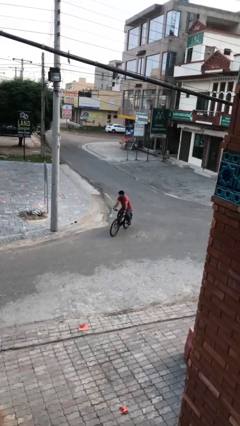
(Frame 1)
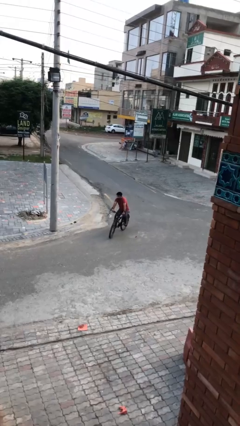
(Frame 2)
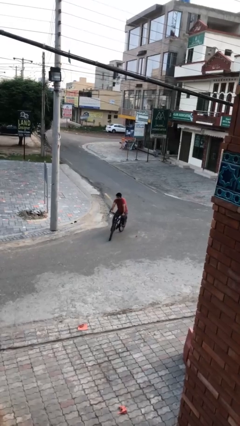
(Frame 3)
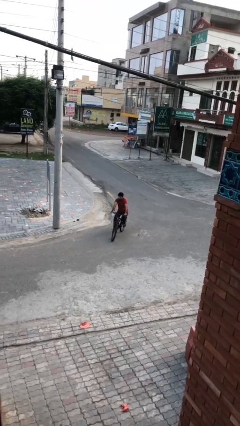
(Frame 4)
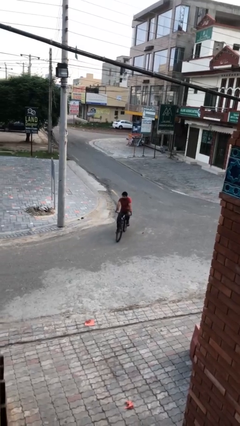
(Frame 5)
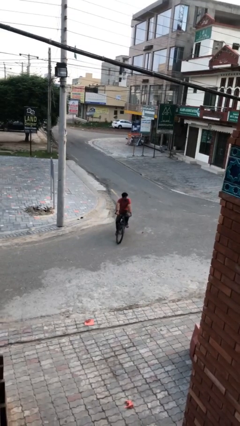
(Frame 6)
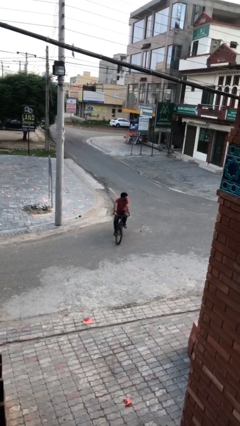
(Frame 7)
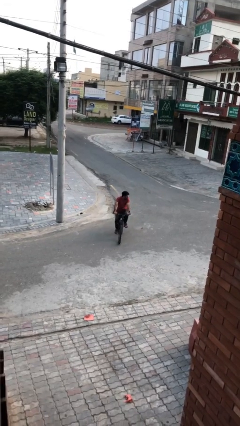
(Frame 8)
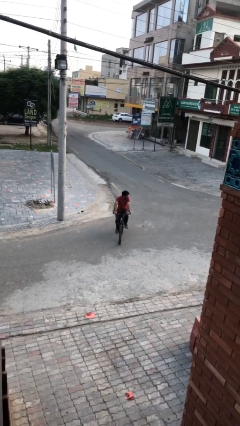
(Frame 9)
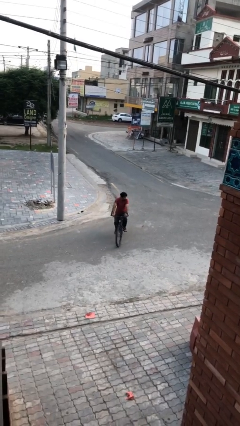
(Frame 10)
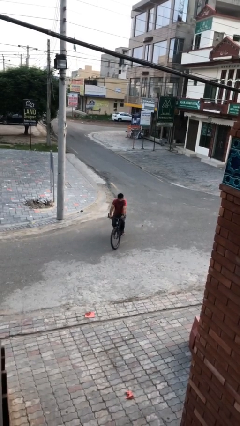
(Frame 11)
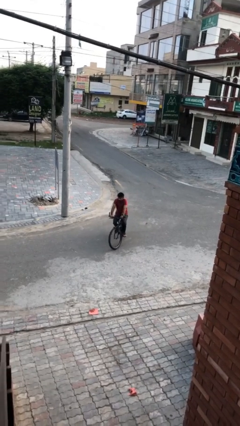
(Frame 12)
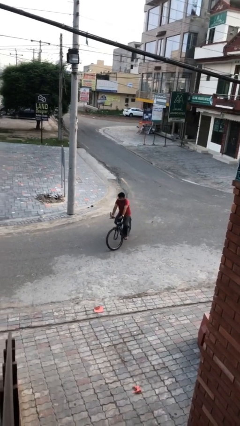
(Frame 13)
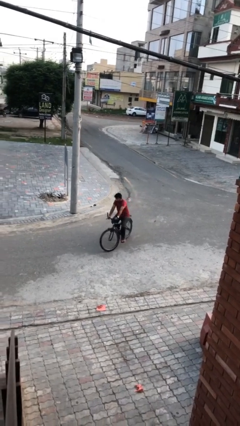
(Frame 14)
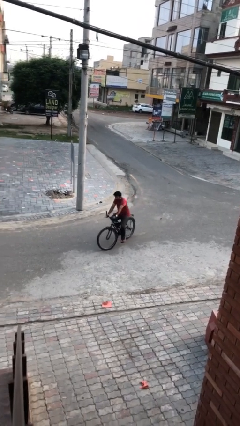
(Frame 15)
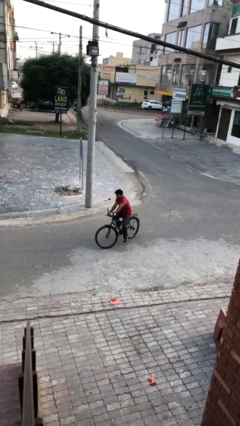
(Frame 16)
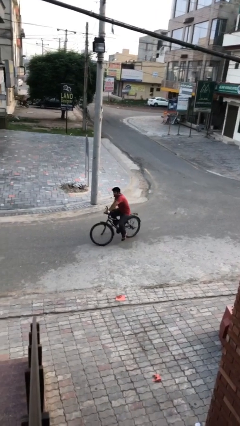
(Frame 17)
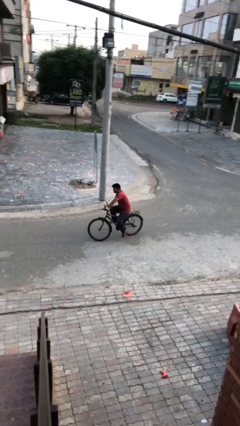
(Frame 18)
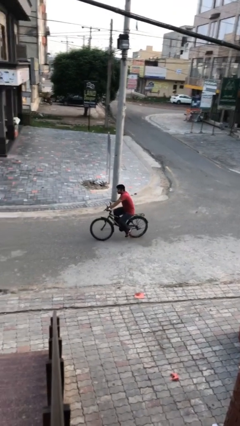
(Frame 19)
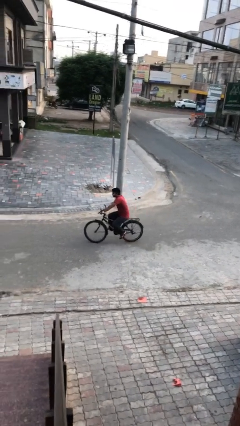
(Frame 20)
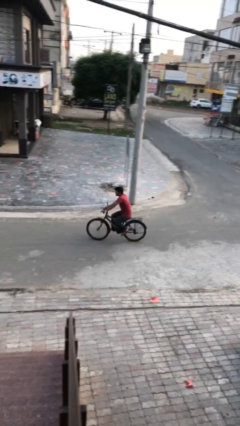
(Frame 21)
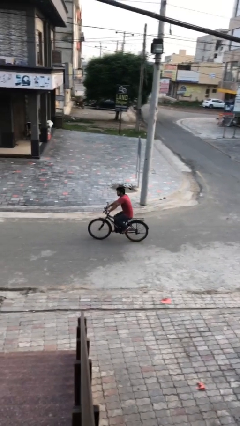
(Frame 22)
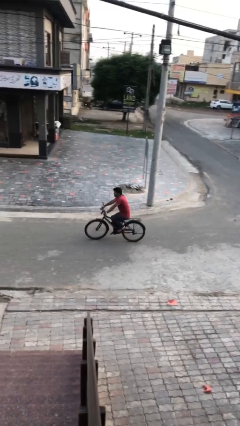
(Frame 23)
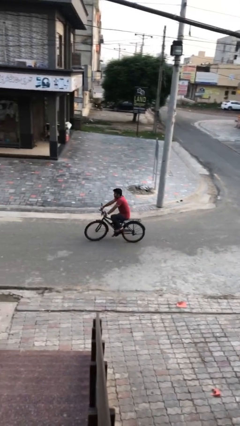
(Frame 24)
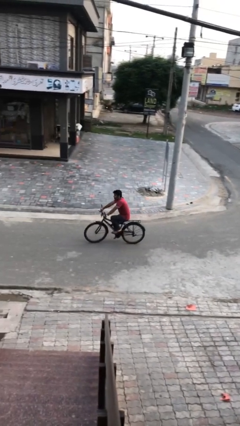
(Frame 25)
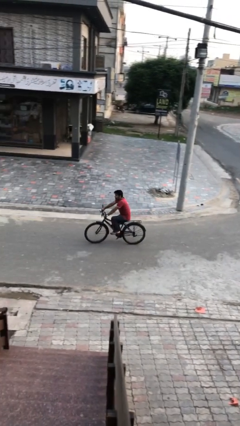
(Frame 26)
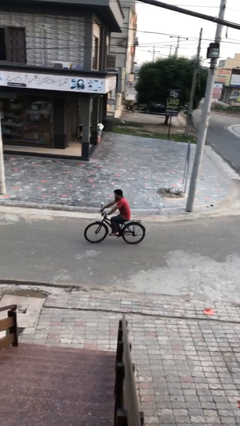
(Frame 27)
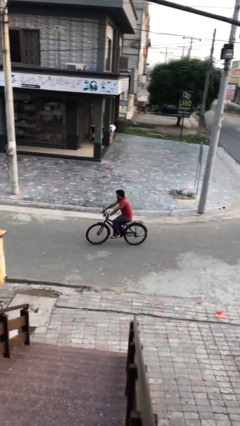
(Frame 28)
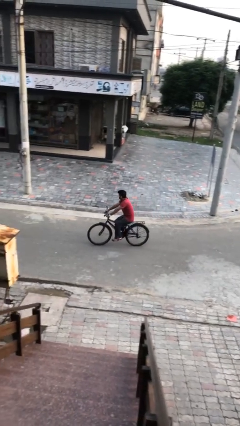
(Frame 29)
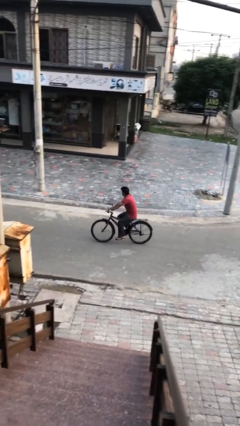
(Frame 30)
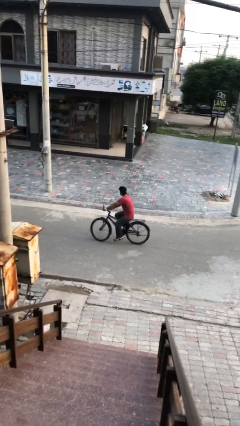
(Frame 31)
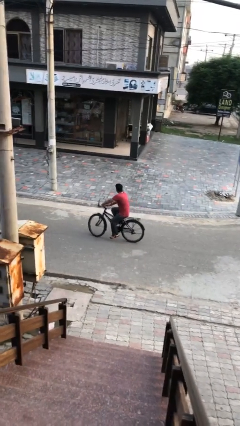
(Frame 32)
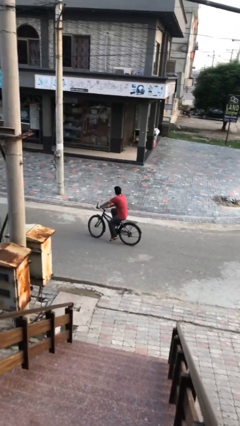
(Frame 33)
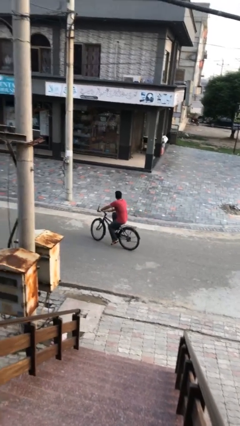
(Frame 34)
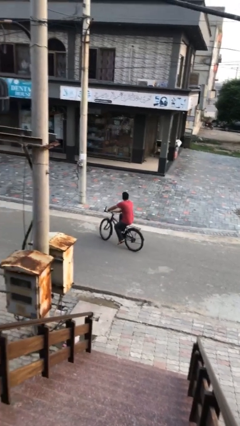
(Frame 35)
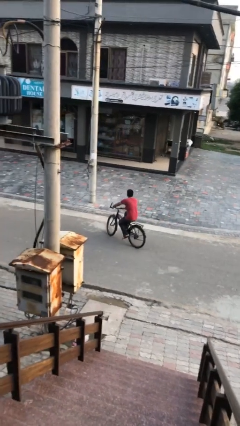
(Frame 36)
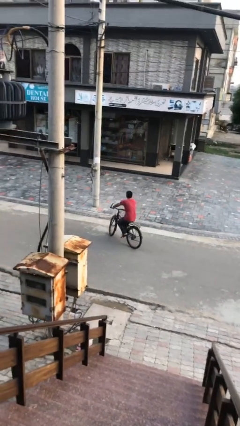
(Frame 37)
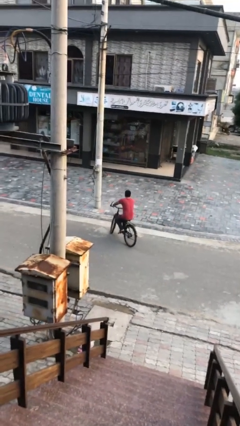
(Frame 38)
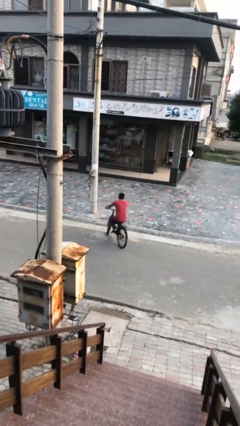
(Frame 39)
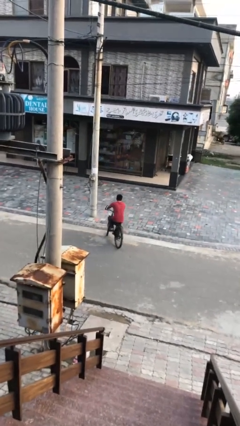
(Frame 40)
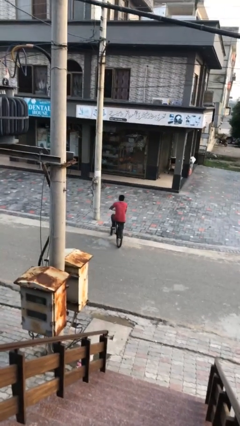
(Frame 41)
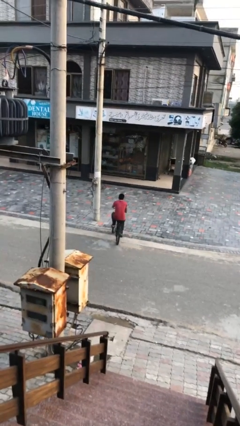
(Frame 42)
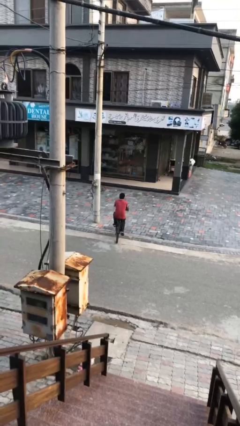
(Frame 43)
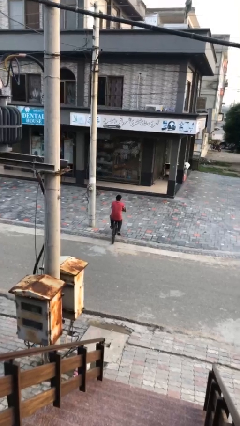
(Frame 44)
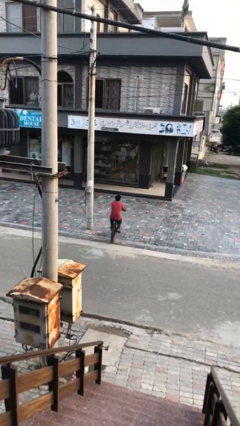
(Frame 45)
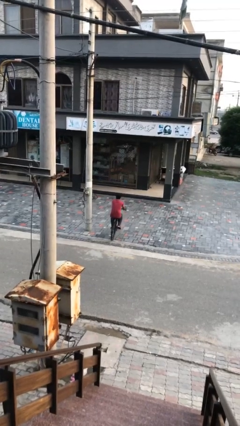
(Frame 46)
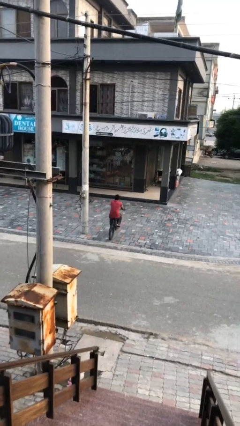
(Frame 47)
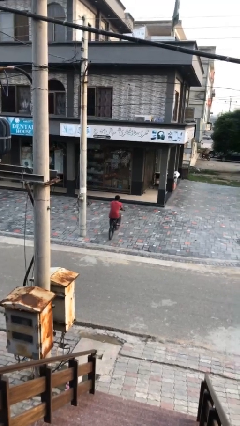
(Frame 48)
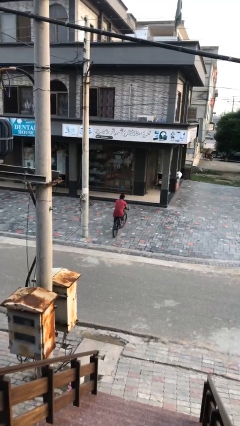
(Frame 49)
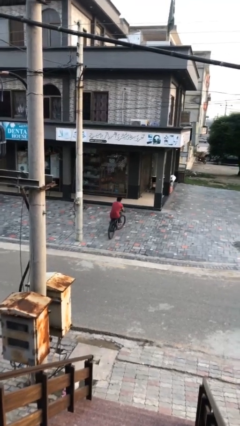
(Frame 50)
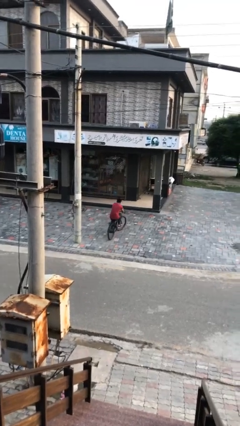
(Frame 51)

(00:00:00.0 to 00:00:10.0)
person rides bicycle

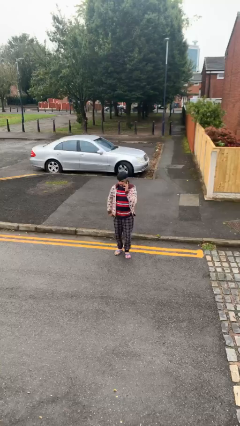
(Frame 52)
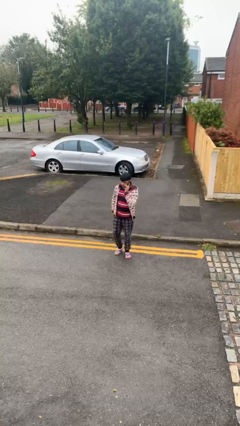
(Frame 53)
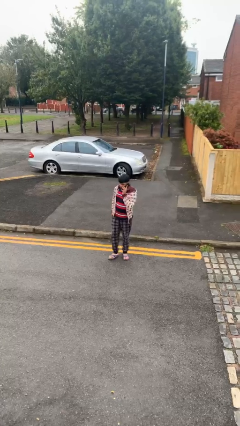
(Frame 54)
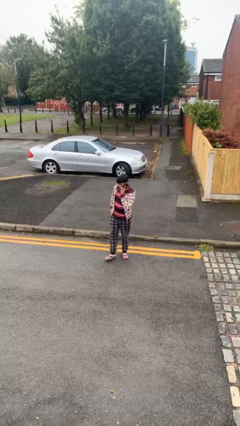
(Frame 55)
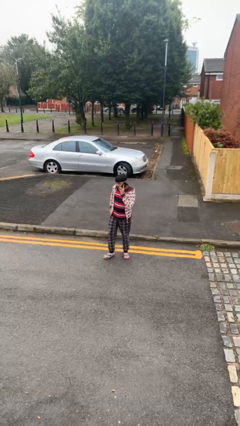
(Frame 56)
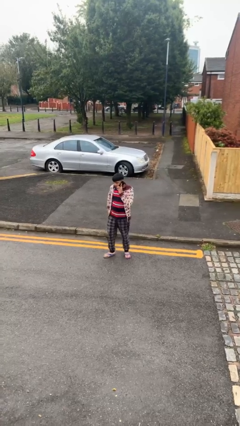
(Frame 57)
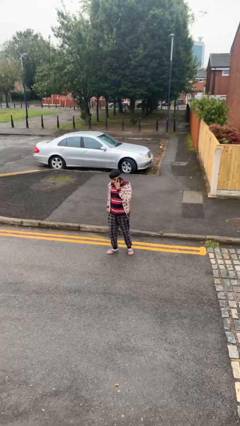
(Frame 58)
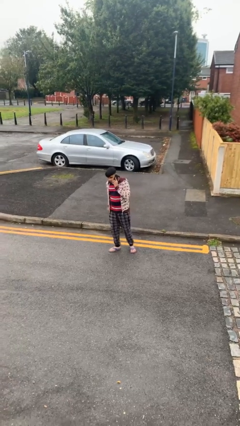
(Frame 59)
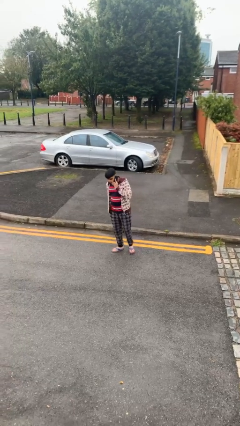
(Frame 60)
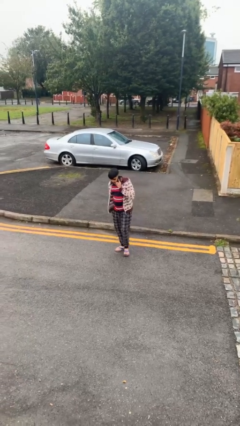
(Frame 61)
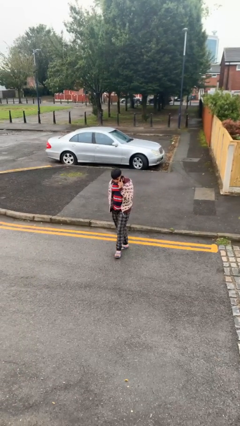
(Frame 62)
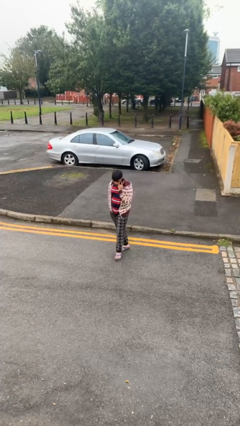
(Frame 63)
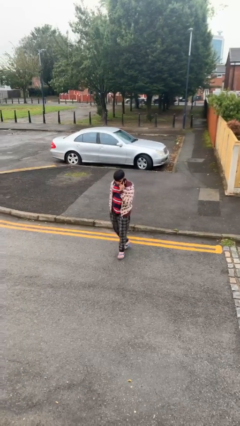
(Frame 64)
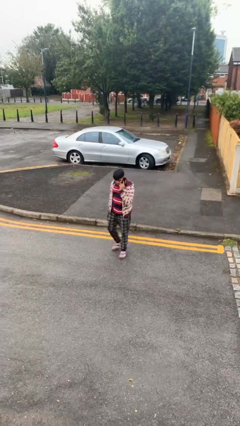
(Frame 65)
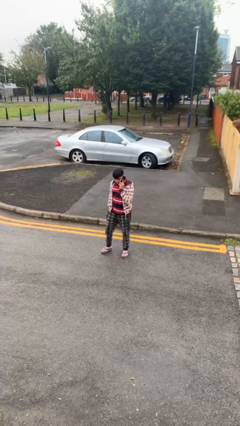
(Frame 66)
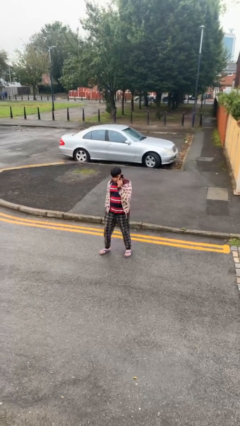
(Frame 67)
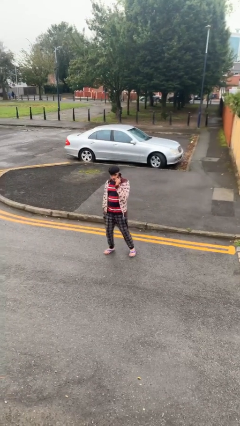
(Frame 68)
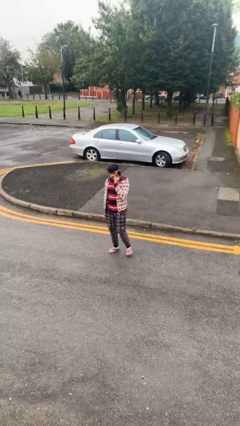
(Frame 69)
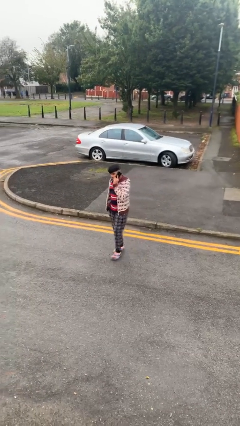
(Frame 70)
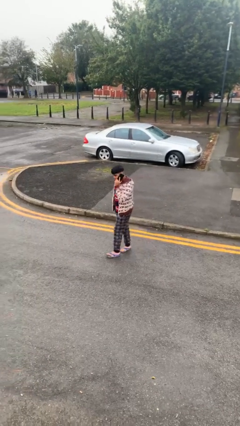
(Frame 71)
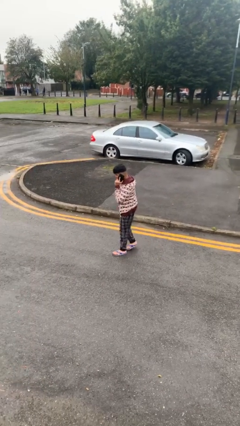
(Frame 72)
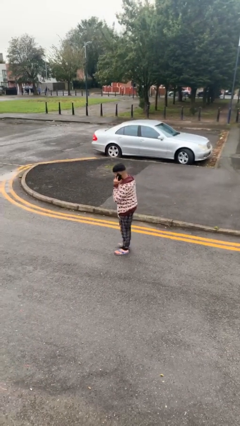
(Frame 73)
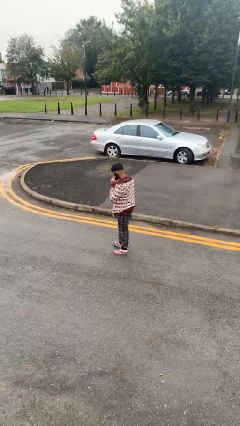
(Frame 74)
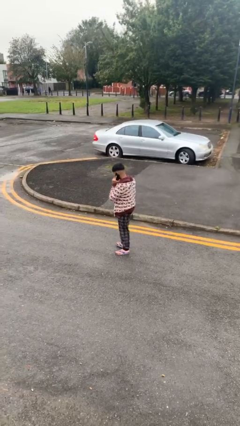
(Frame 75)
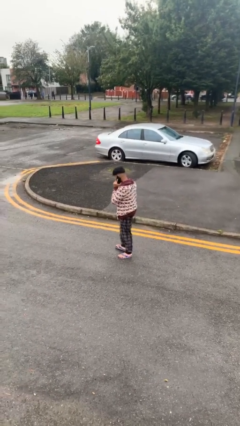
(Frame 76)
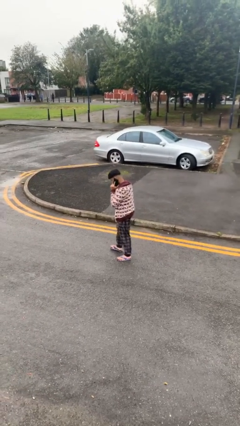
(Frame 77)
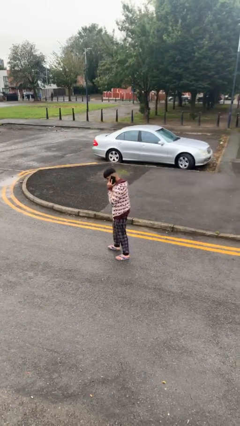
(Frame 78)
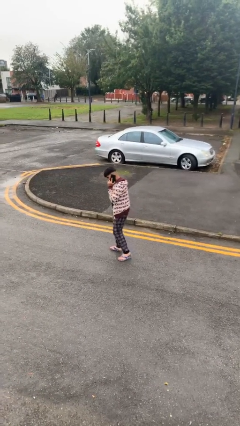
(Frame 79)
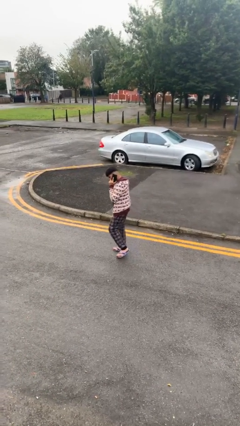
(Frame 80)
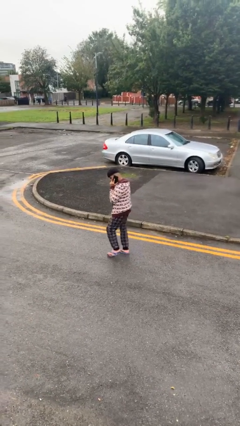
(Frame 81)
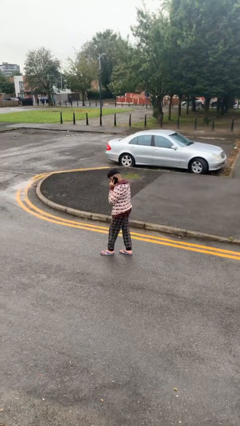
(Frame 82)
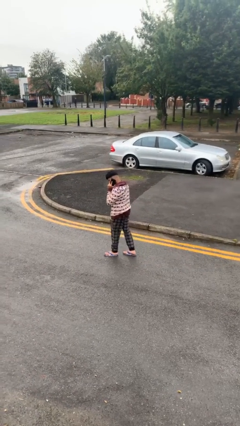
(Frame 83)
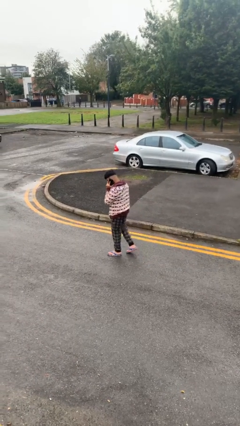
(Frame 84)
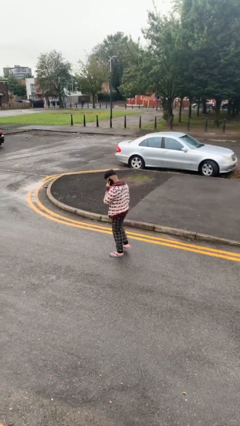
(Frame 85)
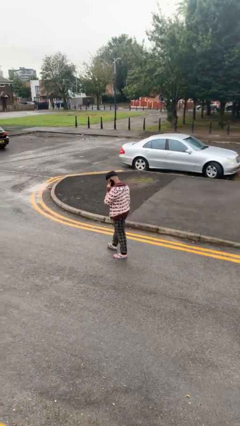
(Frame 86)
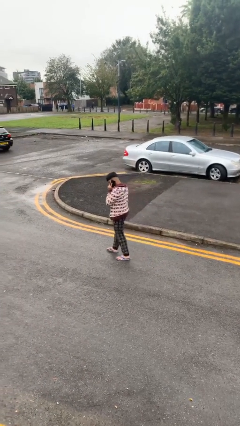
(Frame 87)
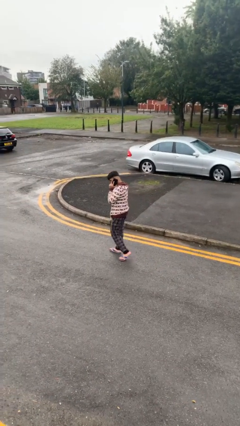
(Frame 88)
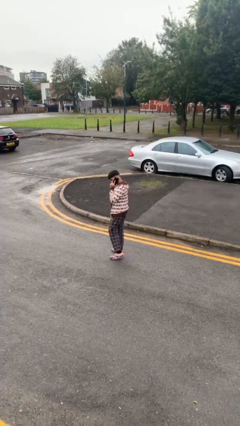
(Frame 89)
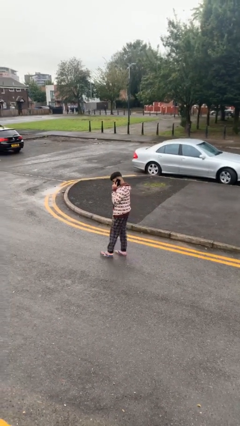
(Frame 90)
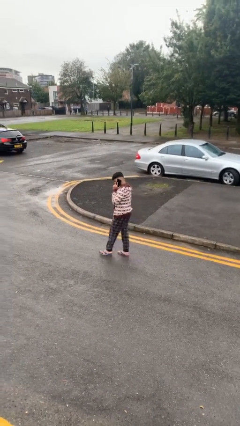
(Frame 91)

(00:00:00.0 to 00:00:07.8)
person talks on phone

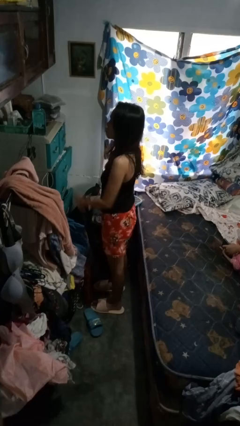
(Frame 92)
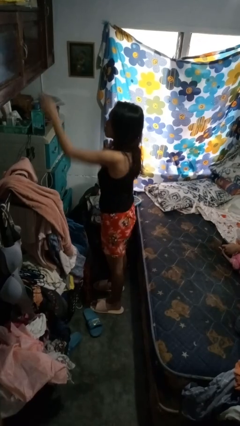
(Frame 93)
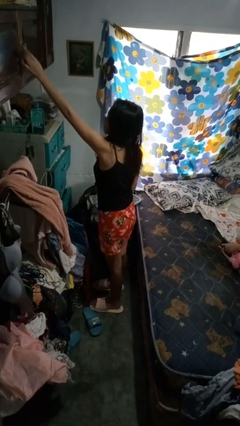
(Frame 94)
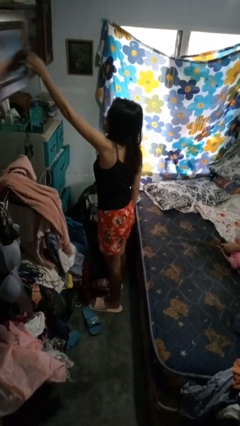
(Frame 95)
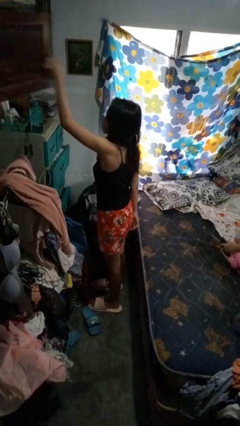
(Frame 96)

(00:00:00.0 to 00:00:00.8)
person opens closet door
